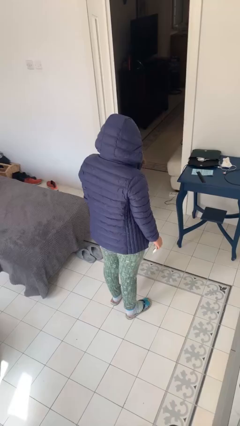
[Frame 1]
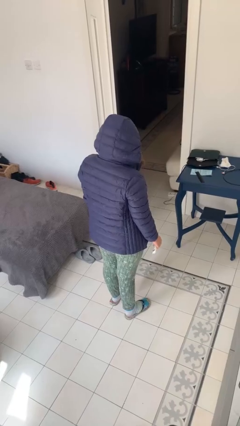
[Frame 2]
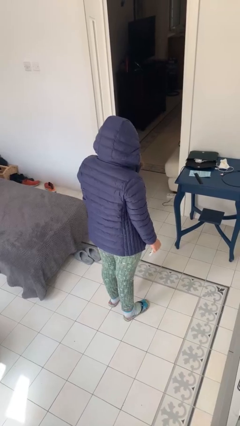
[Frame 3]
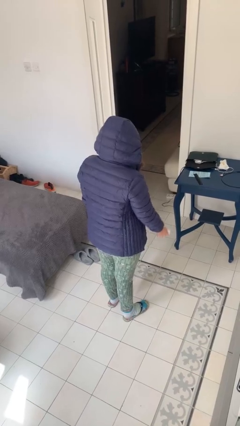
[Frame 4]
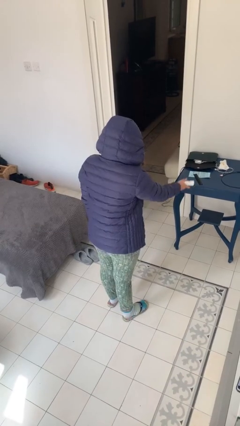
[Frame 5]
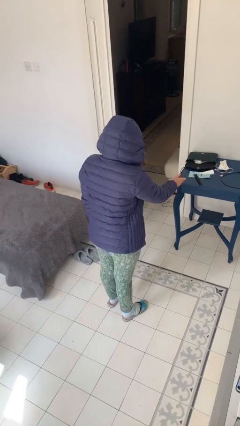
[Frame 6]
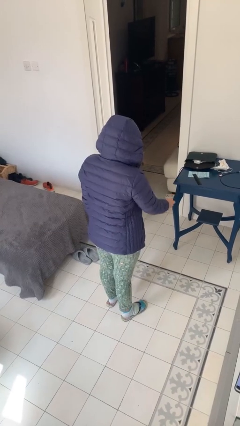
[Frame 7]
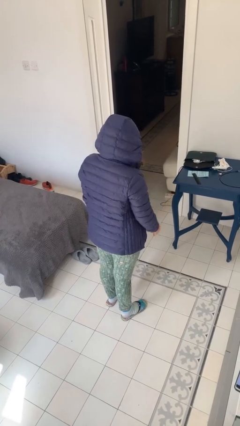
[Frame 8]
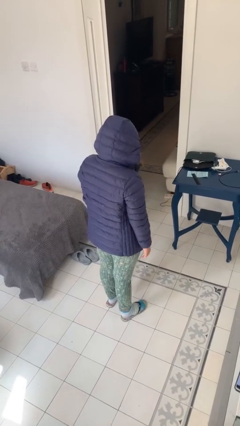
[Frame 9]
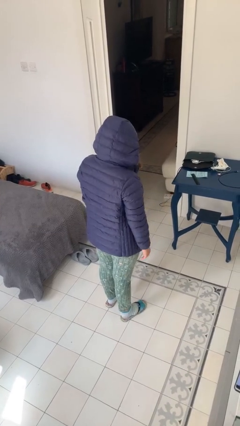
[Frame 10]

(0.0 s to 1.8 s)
person throws object on table

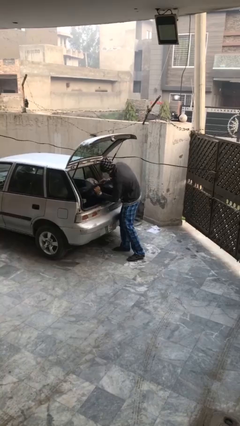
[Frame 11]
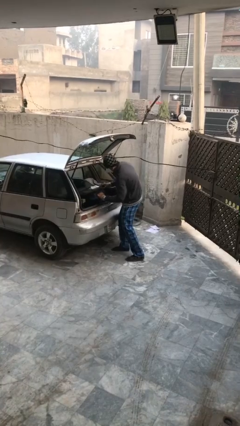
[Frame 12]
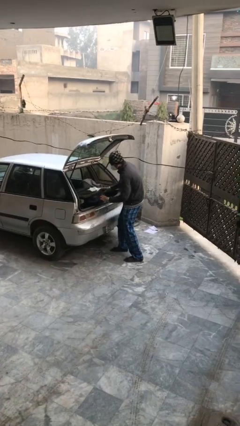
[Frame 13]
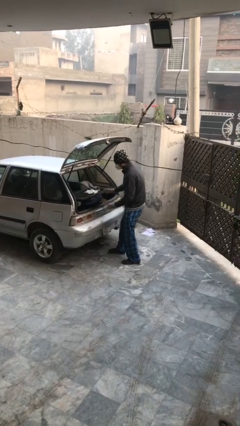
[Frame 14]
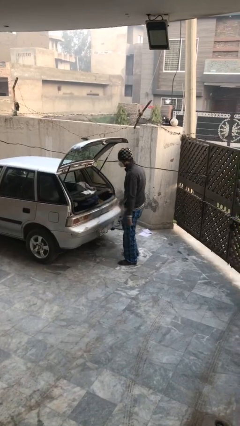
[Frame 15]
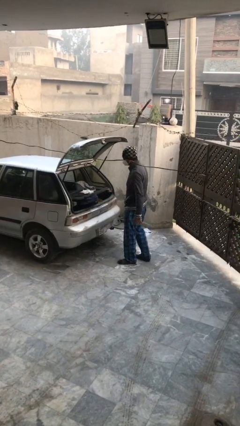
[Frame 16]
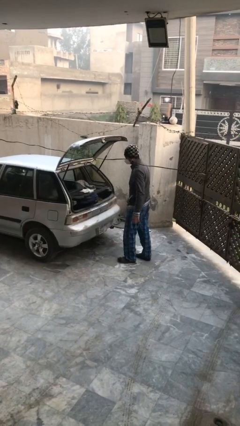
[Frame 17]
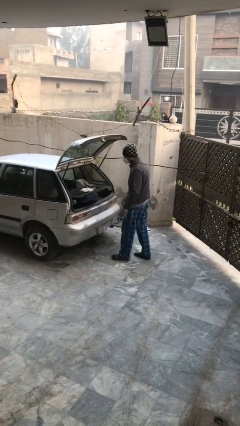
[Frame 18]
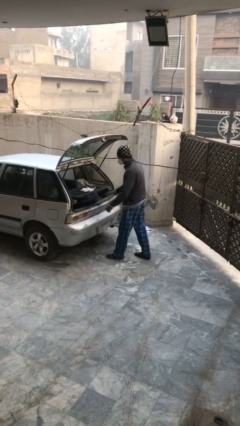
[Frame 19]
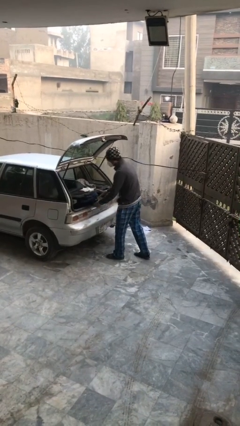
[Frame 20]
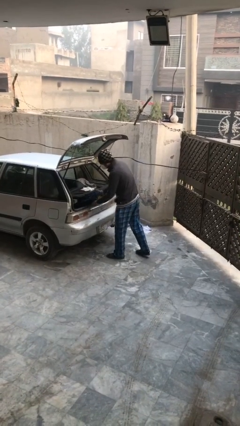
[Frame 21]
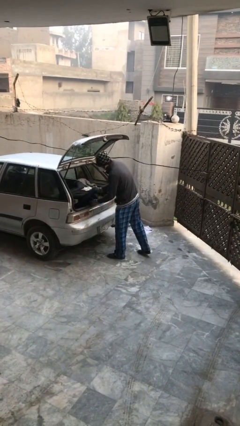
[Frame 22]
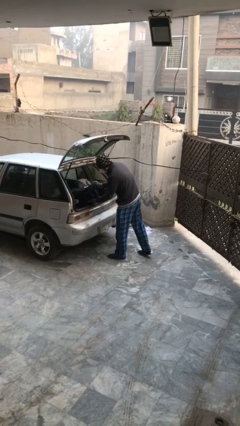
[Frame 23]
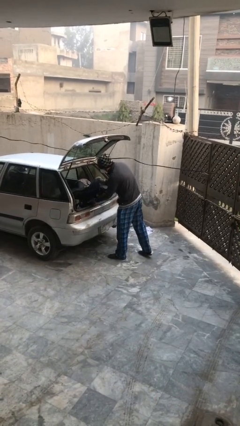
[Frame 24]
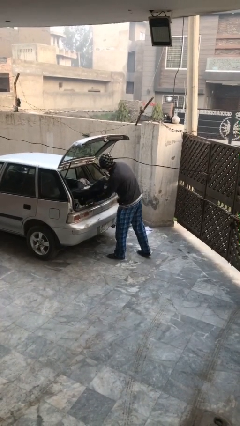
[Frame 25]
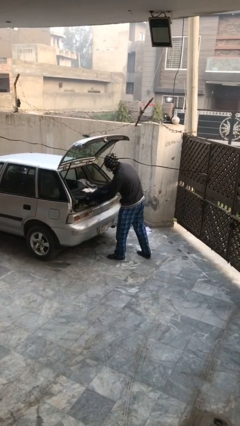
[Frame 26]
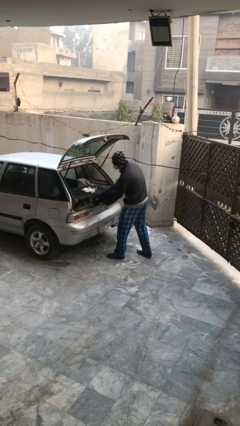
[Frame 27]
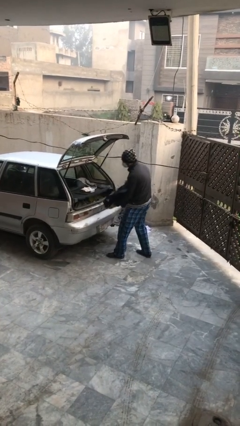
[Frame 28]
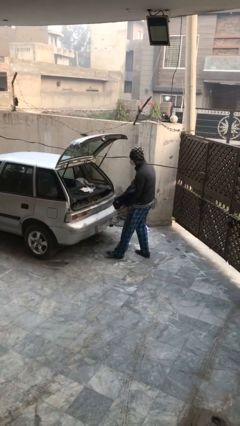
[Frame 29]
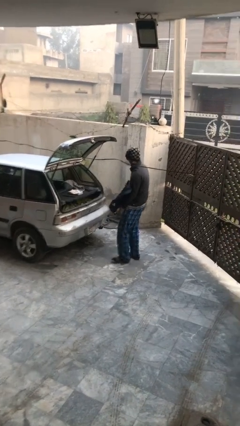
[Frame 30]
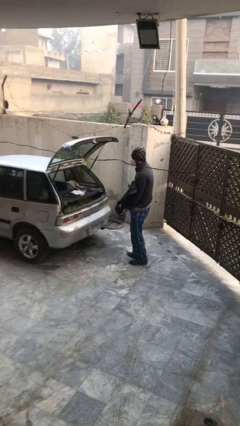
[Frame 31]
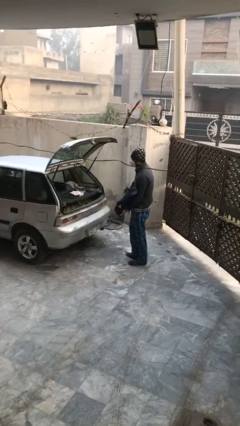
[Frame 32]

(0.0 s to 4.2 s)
person unloads car

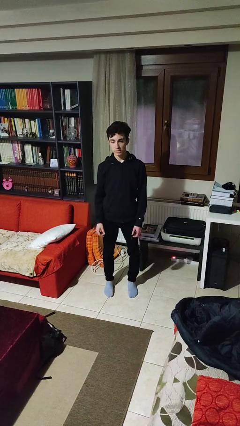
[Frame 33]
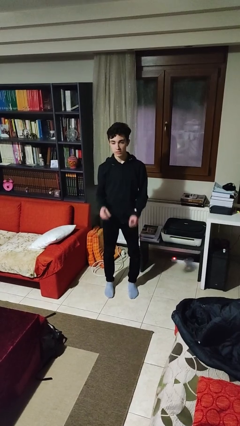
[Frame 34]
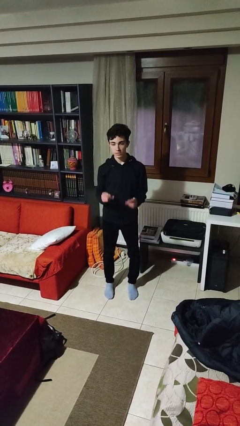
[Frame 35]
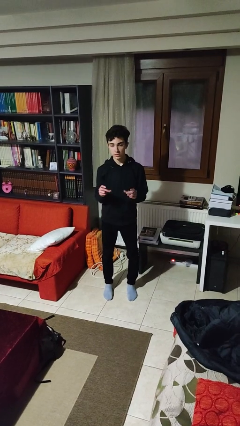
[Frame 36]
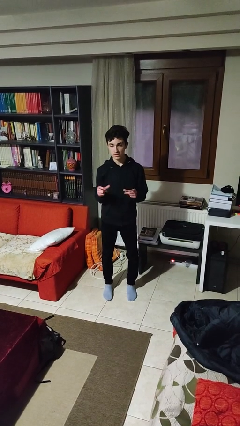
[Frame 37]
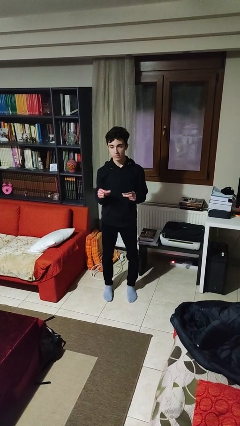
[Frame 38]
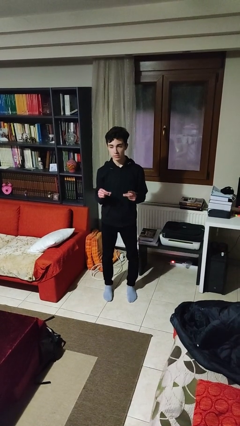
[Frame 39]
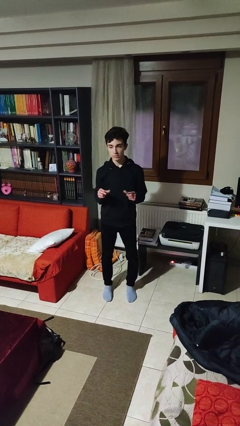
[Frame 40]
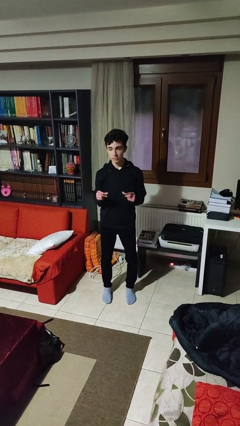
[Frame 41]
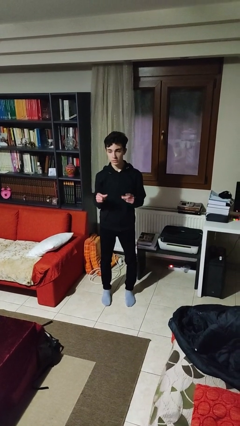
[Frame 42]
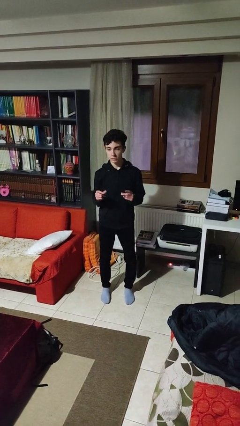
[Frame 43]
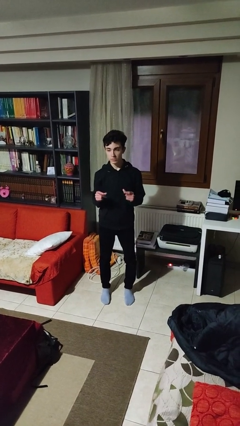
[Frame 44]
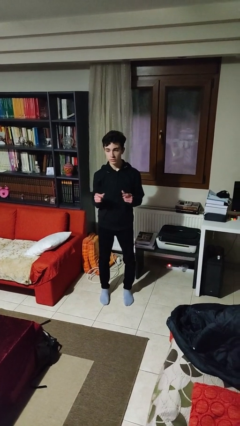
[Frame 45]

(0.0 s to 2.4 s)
person snaps fingers

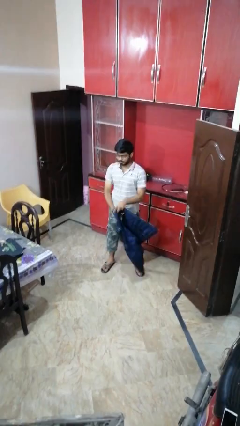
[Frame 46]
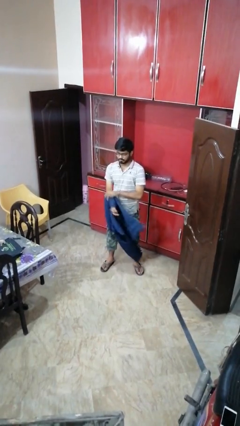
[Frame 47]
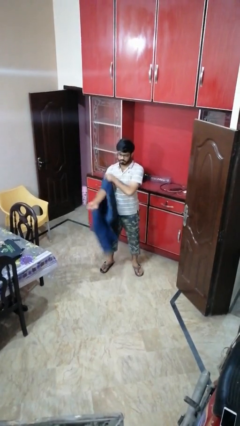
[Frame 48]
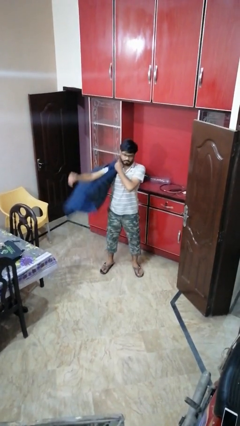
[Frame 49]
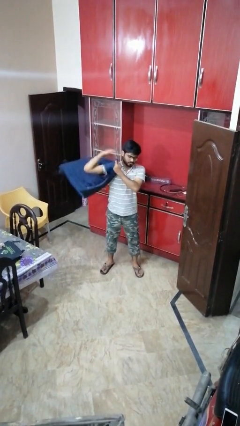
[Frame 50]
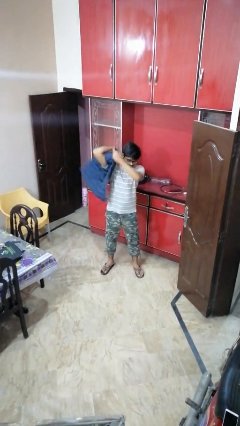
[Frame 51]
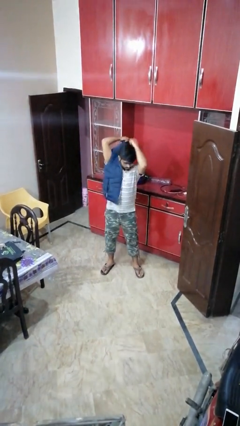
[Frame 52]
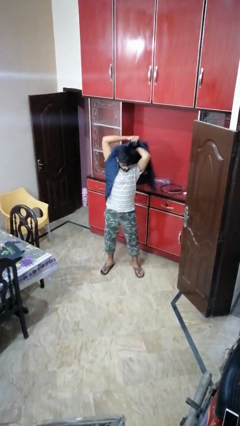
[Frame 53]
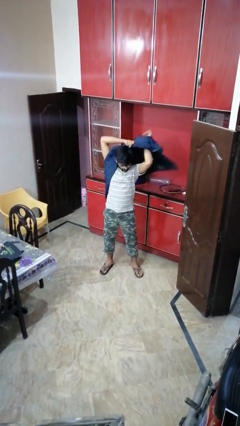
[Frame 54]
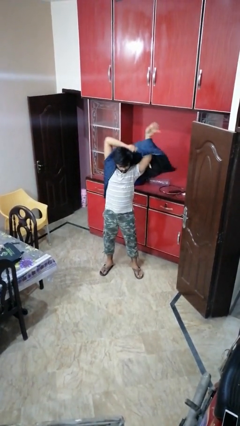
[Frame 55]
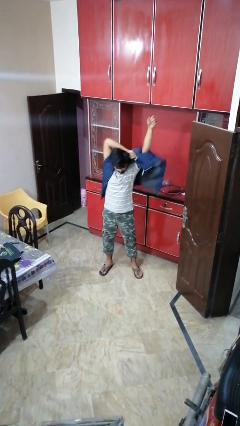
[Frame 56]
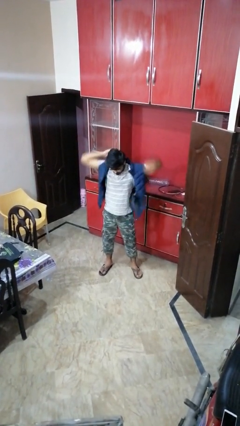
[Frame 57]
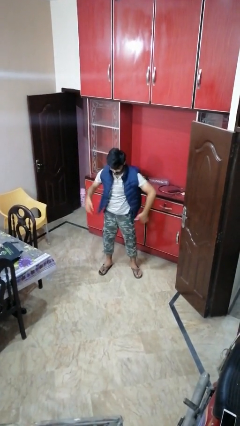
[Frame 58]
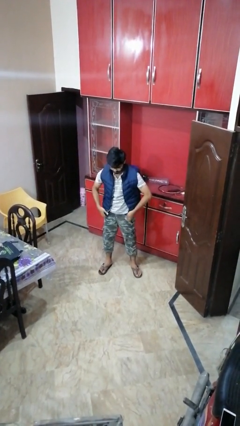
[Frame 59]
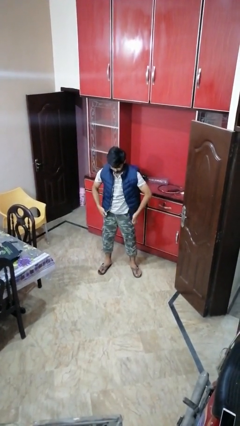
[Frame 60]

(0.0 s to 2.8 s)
person puts on jacket

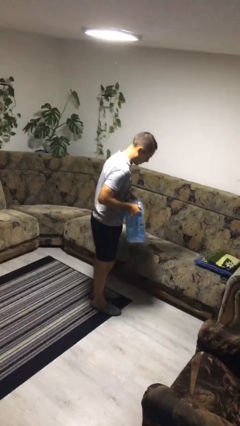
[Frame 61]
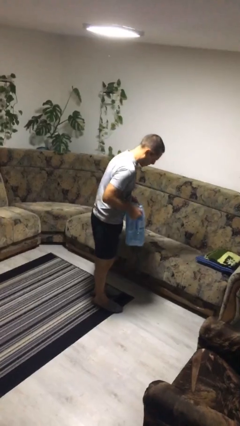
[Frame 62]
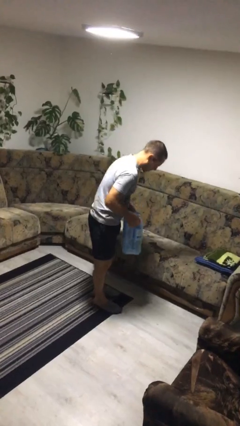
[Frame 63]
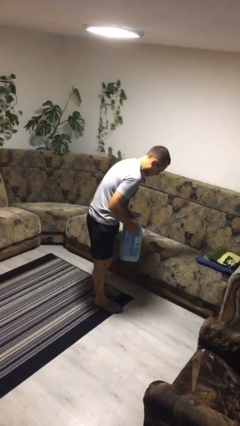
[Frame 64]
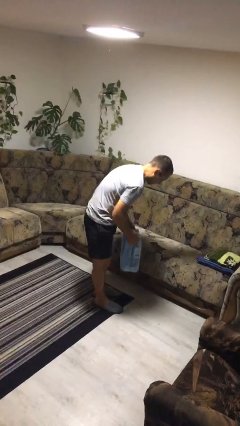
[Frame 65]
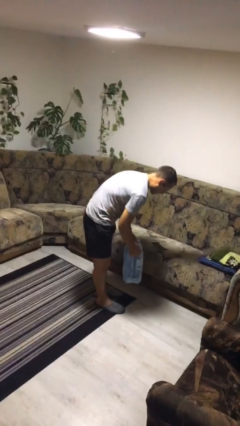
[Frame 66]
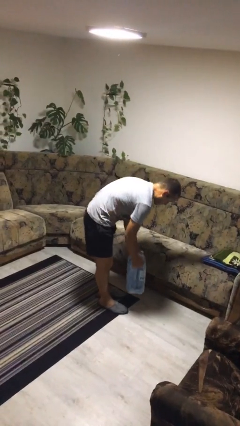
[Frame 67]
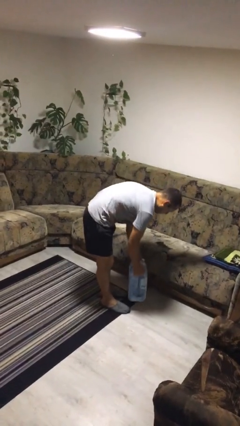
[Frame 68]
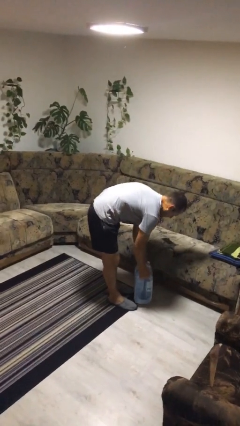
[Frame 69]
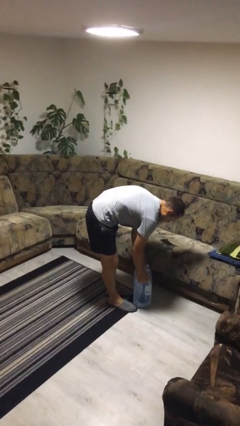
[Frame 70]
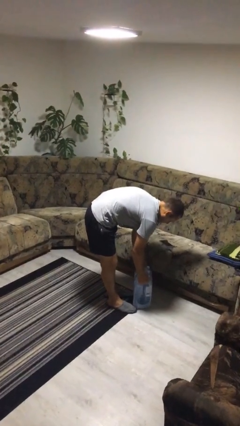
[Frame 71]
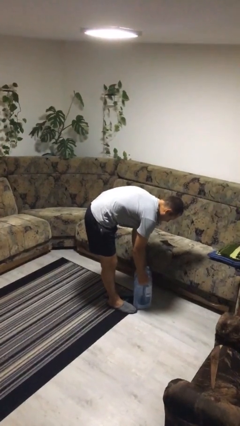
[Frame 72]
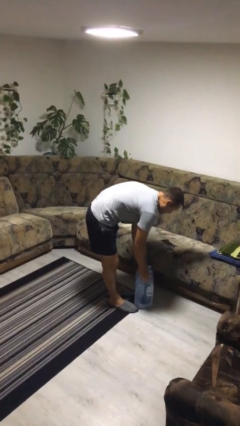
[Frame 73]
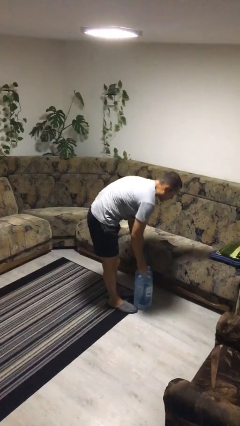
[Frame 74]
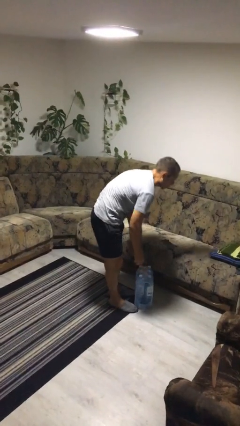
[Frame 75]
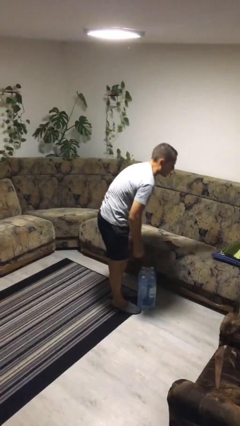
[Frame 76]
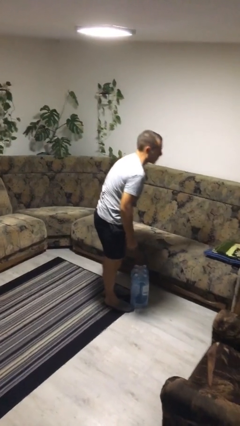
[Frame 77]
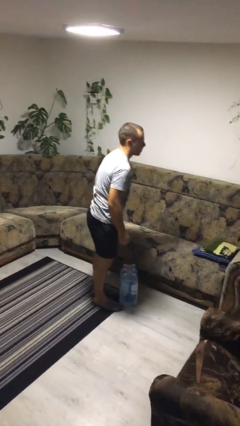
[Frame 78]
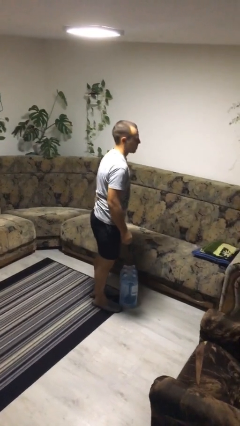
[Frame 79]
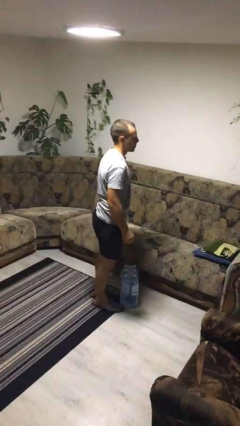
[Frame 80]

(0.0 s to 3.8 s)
person puts down object on floor

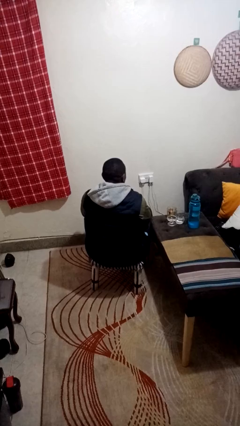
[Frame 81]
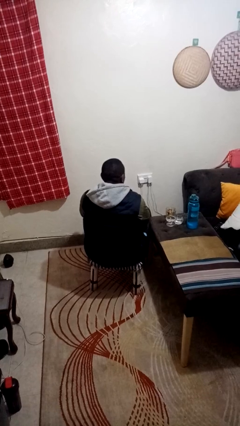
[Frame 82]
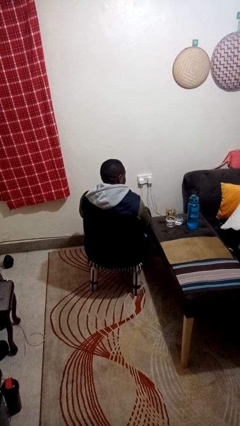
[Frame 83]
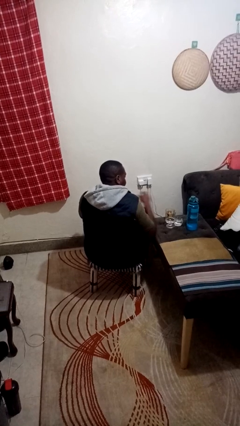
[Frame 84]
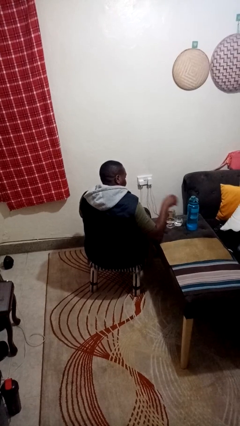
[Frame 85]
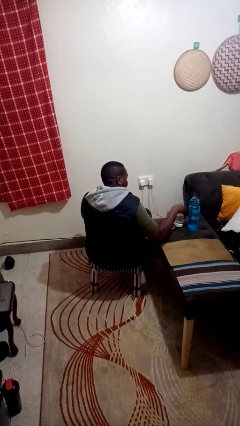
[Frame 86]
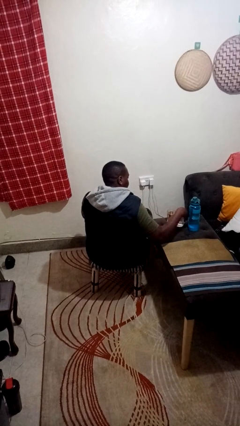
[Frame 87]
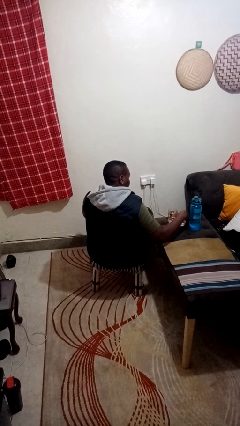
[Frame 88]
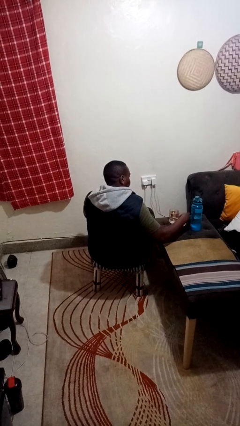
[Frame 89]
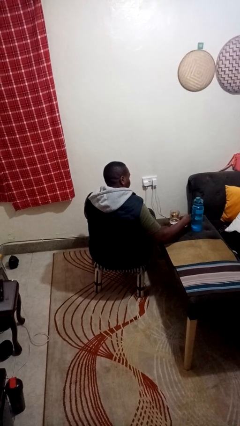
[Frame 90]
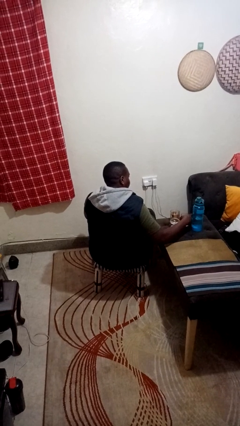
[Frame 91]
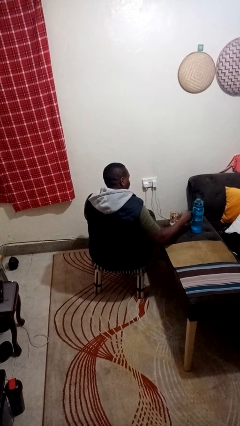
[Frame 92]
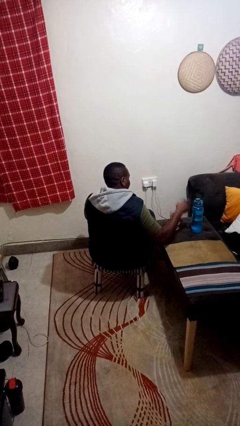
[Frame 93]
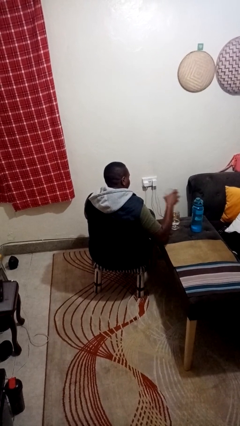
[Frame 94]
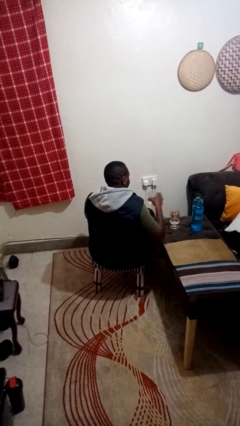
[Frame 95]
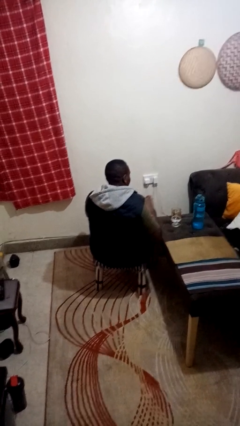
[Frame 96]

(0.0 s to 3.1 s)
person picks up object from table
